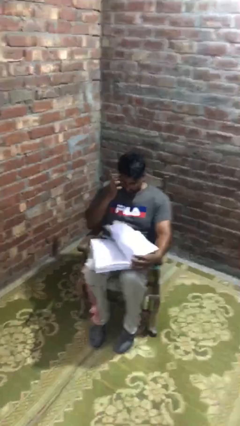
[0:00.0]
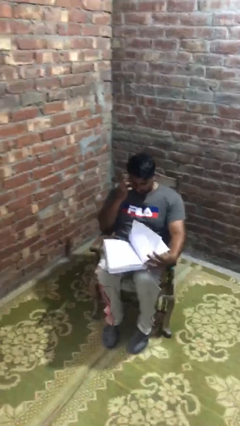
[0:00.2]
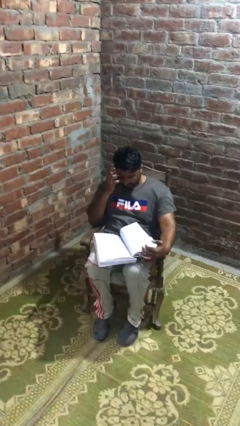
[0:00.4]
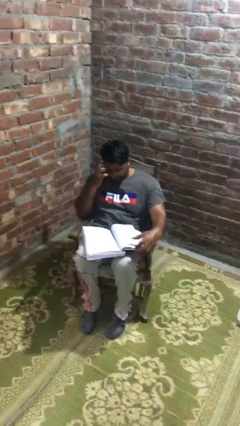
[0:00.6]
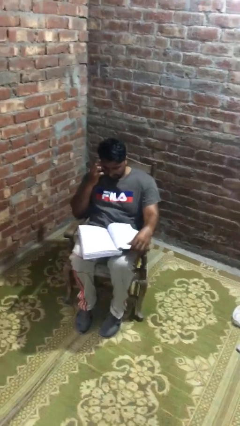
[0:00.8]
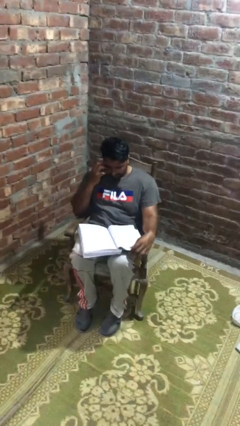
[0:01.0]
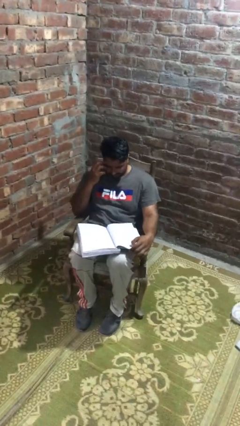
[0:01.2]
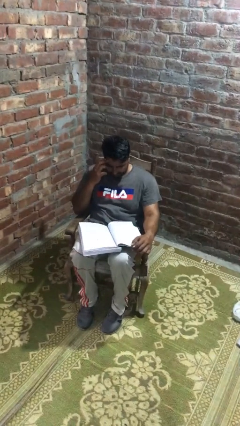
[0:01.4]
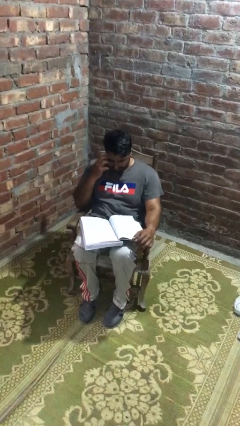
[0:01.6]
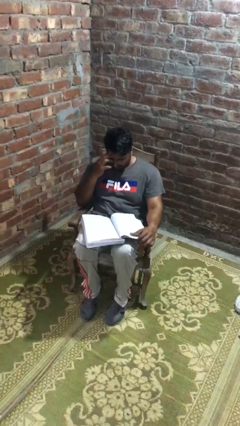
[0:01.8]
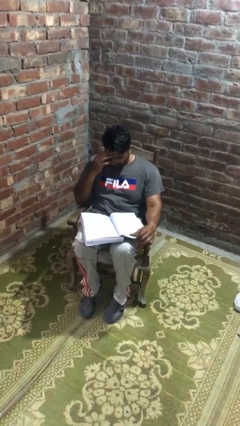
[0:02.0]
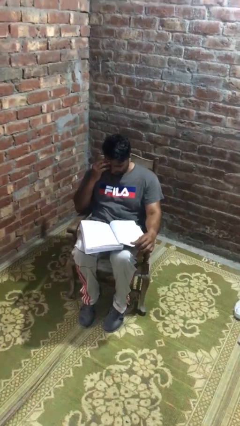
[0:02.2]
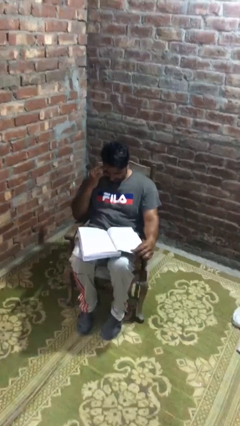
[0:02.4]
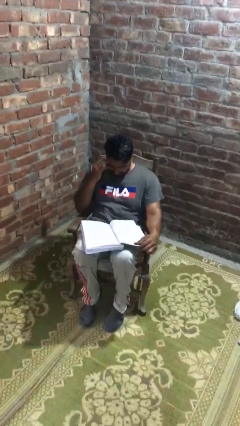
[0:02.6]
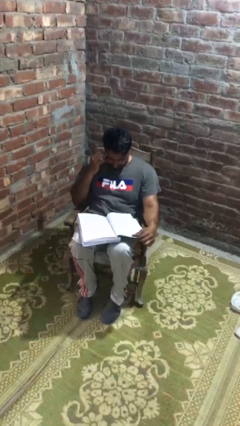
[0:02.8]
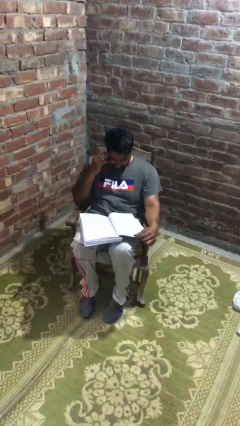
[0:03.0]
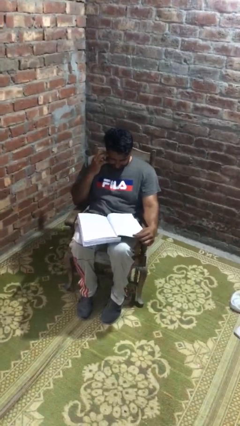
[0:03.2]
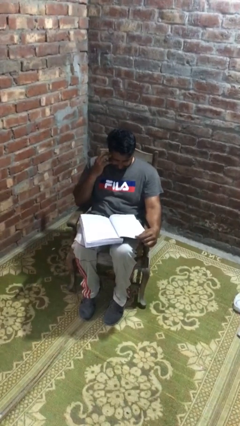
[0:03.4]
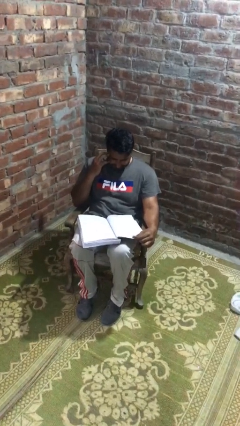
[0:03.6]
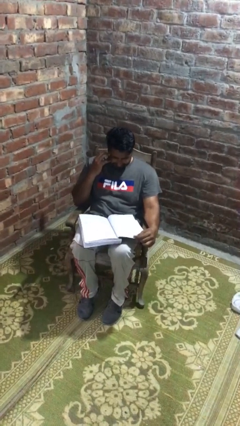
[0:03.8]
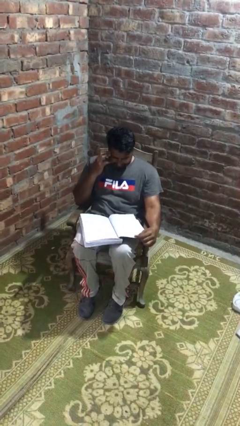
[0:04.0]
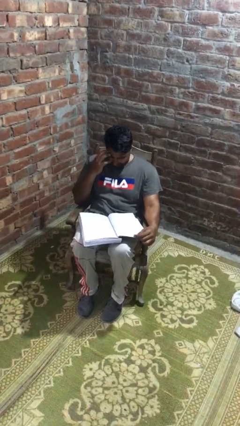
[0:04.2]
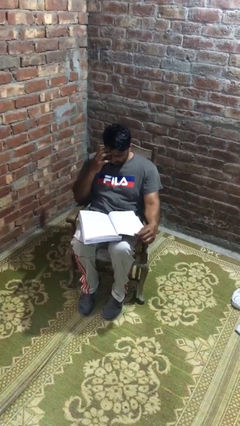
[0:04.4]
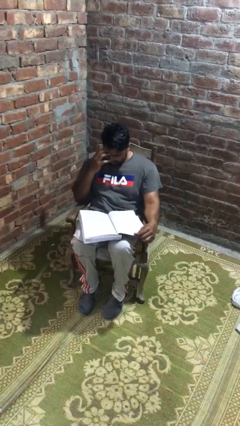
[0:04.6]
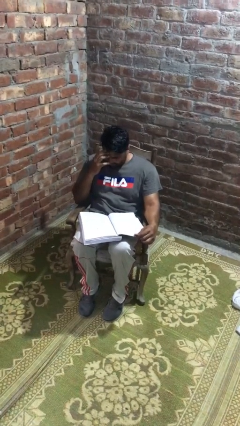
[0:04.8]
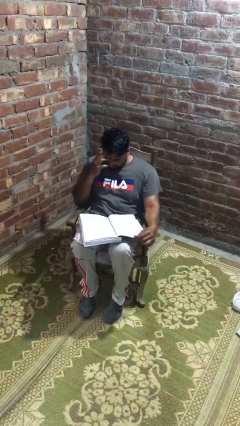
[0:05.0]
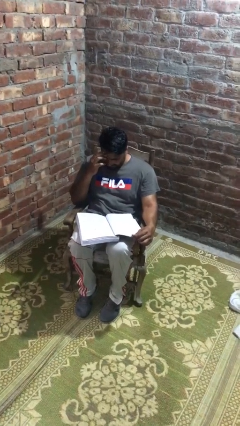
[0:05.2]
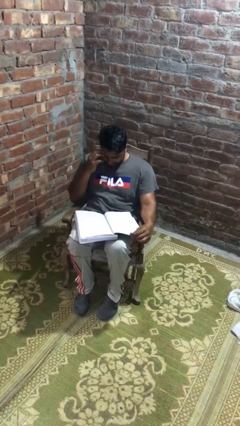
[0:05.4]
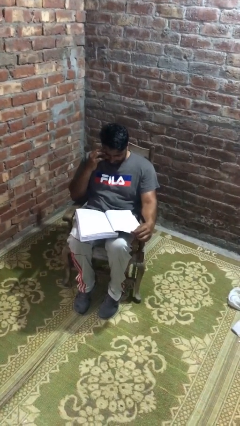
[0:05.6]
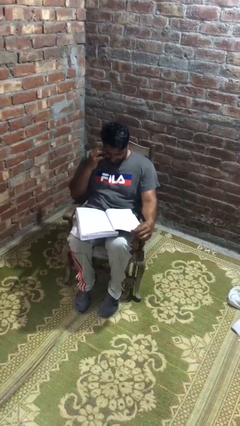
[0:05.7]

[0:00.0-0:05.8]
person reads document

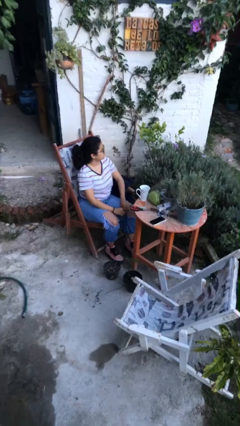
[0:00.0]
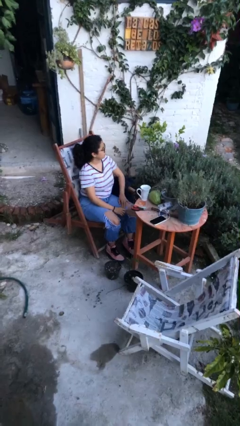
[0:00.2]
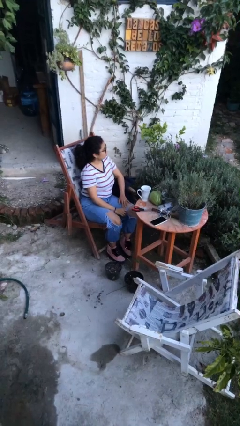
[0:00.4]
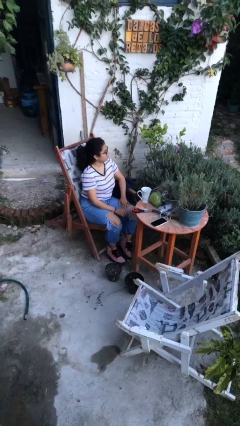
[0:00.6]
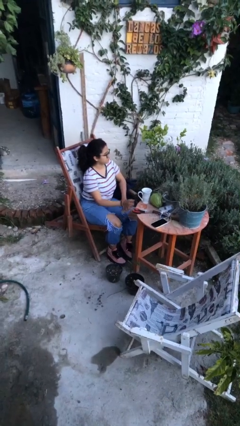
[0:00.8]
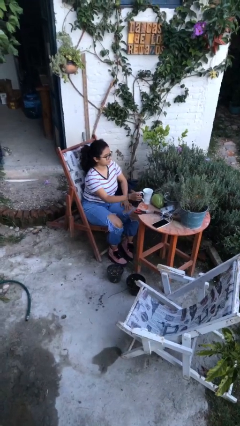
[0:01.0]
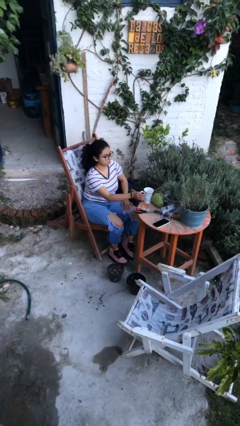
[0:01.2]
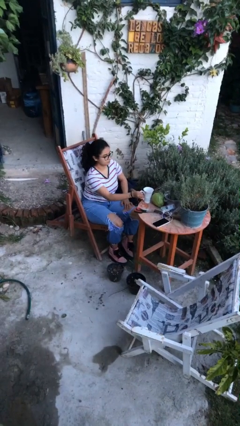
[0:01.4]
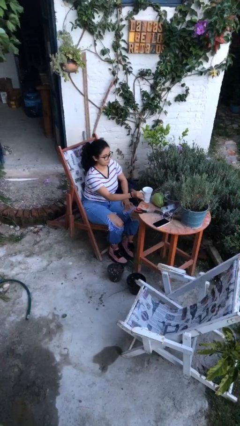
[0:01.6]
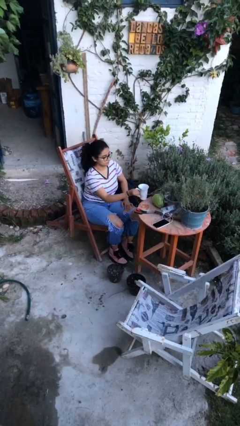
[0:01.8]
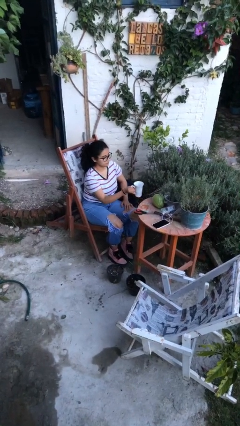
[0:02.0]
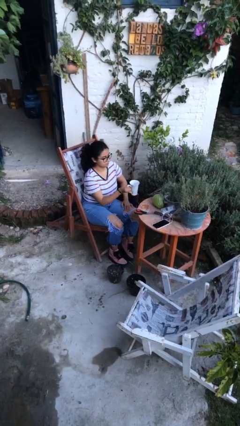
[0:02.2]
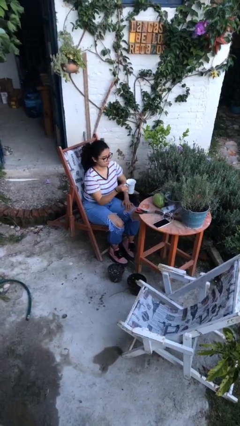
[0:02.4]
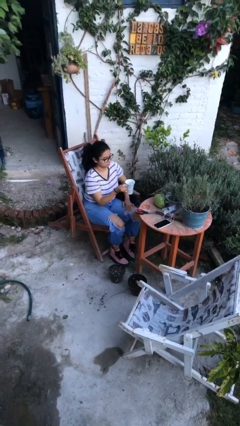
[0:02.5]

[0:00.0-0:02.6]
person picks up object from table

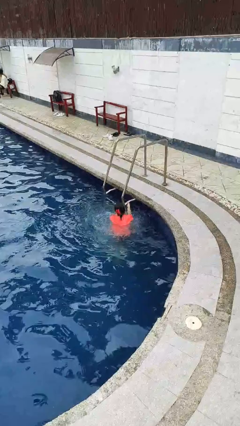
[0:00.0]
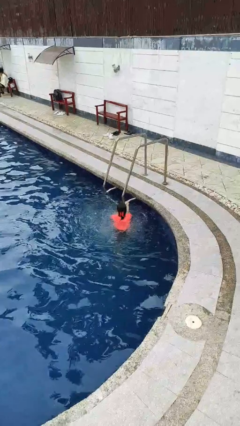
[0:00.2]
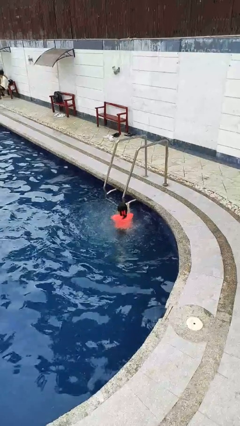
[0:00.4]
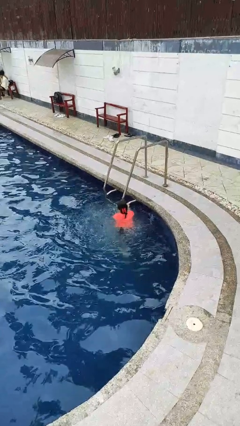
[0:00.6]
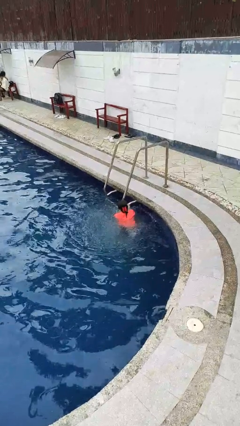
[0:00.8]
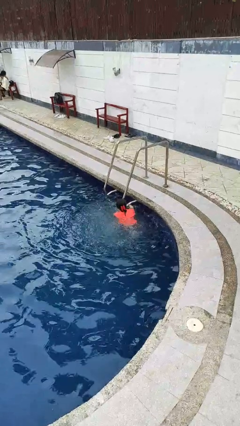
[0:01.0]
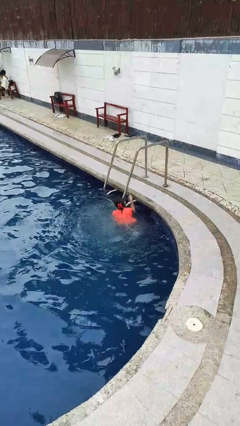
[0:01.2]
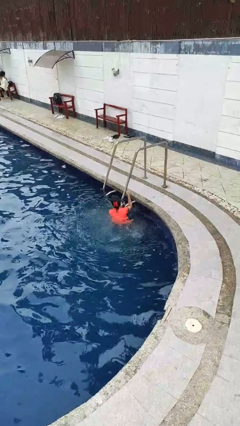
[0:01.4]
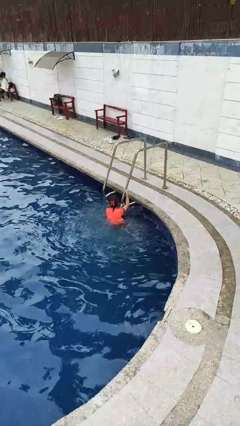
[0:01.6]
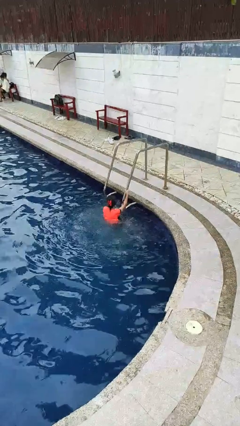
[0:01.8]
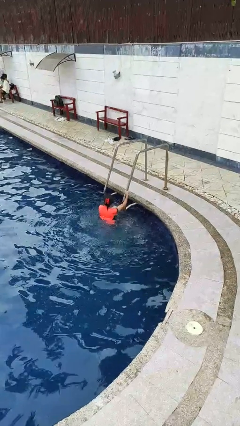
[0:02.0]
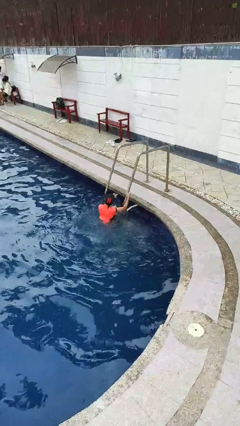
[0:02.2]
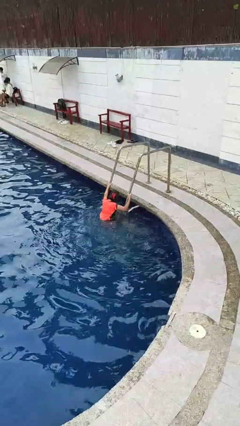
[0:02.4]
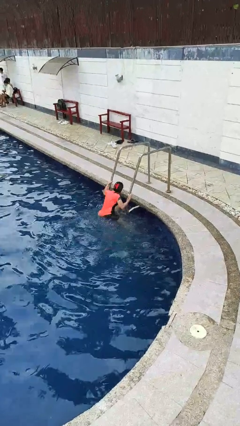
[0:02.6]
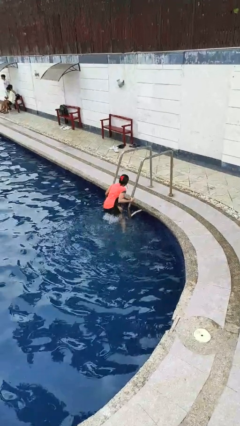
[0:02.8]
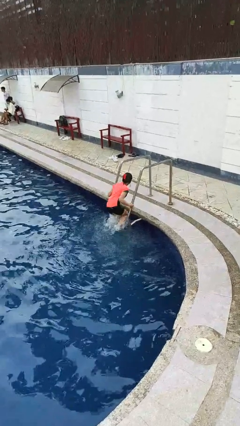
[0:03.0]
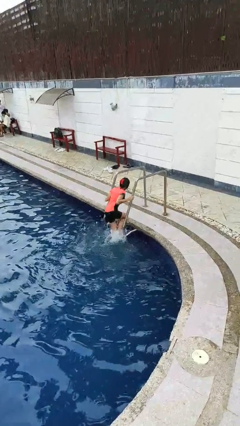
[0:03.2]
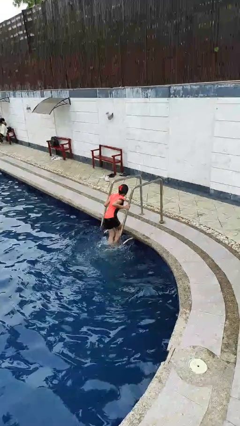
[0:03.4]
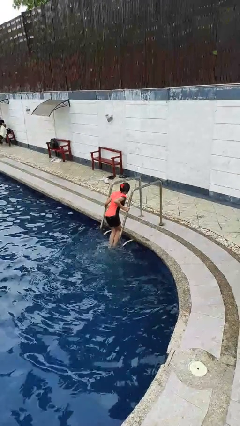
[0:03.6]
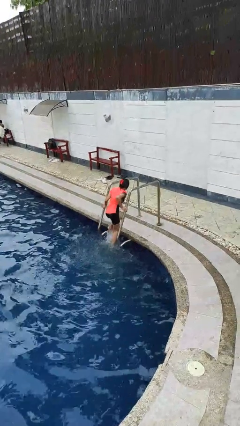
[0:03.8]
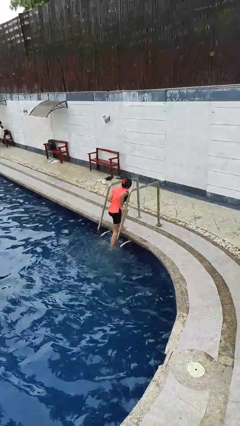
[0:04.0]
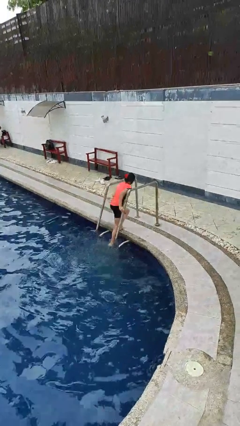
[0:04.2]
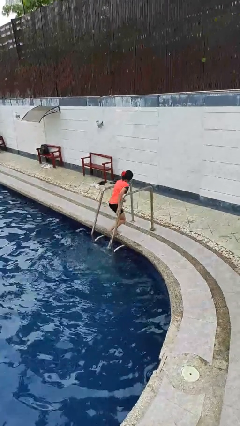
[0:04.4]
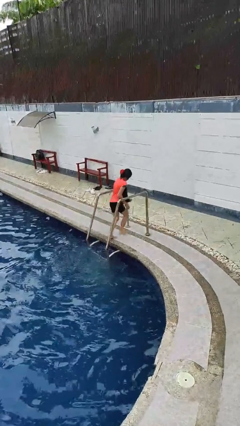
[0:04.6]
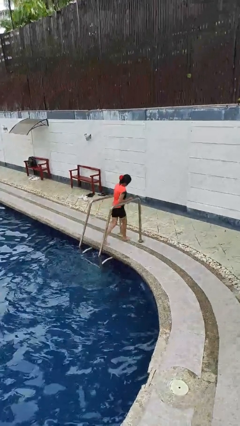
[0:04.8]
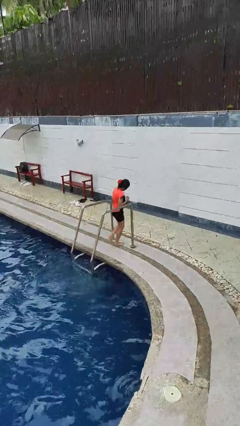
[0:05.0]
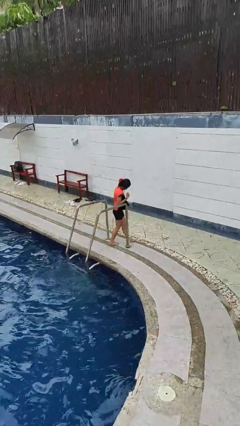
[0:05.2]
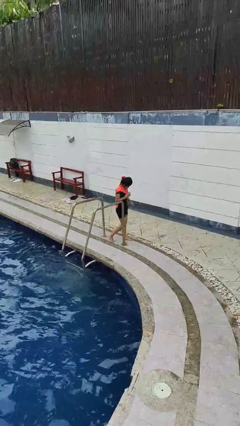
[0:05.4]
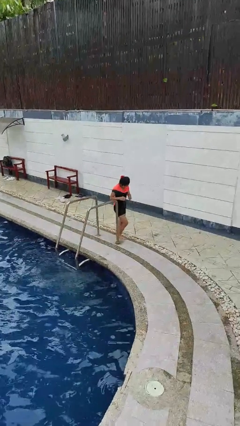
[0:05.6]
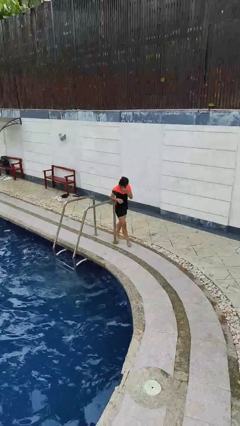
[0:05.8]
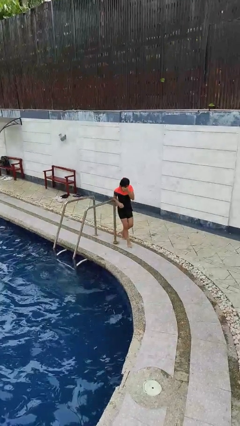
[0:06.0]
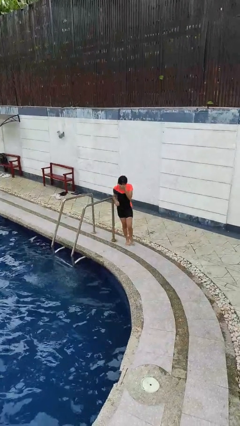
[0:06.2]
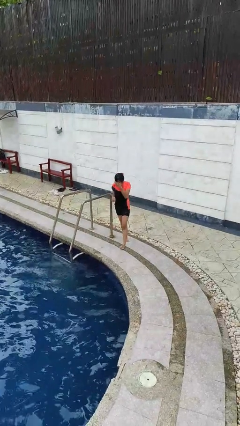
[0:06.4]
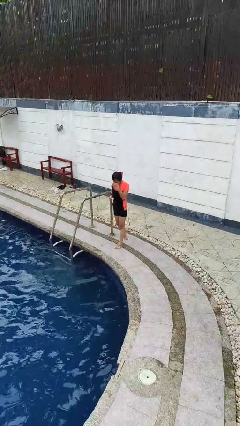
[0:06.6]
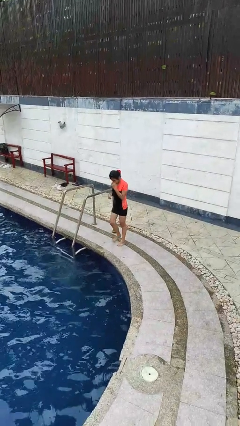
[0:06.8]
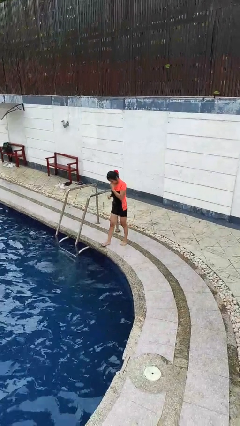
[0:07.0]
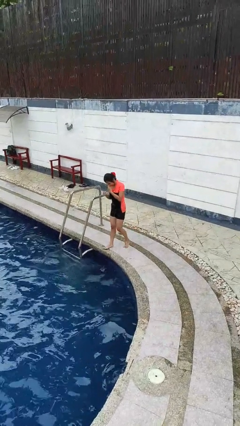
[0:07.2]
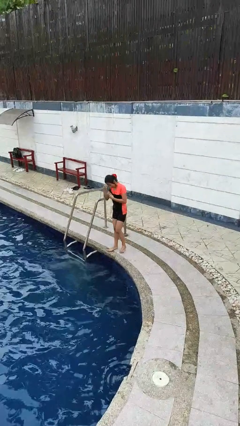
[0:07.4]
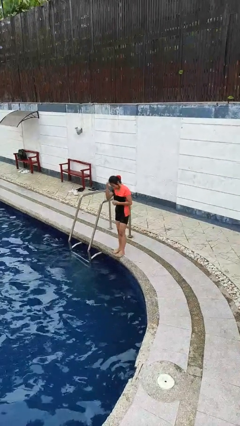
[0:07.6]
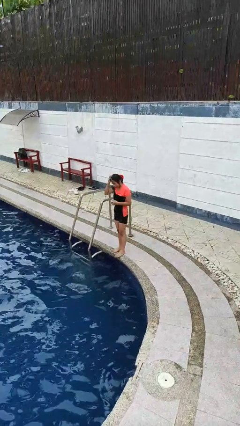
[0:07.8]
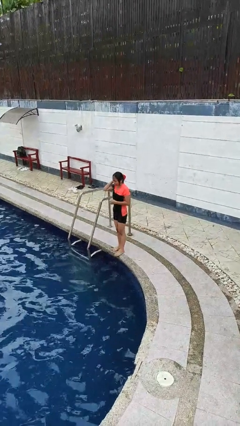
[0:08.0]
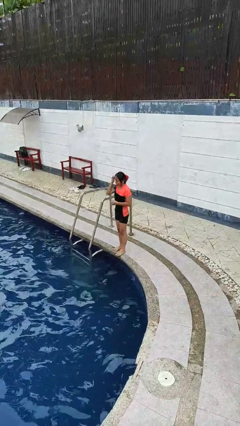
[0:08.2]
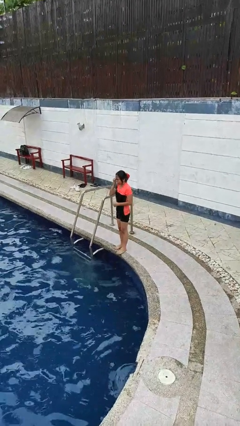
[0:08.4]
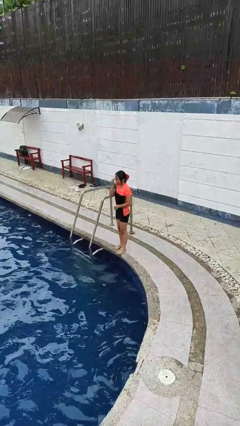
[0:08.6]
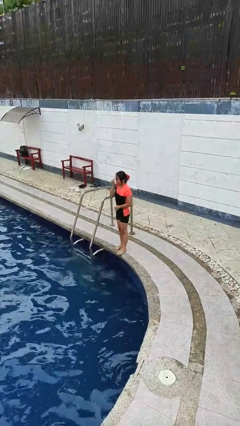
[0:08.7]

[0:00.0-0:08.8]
person exits pool

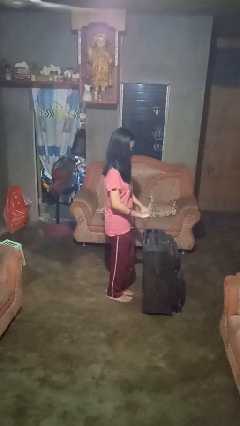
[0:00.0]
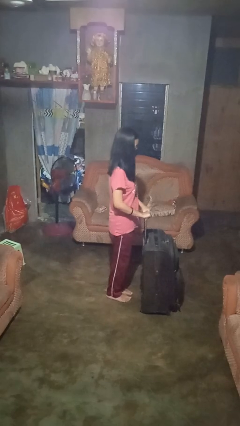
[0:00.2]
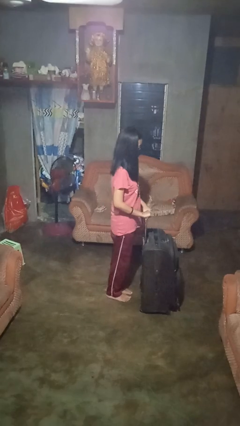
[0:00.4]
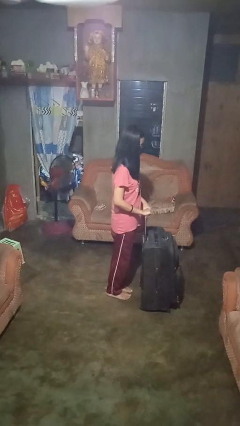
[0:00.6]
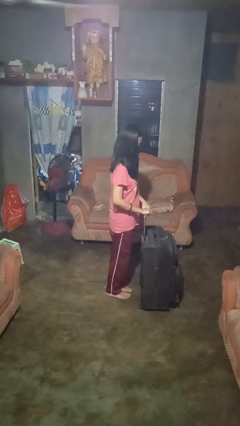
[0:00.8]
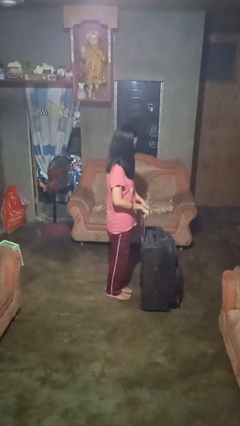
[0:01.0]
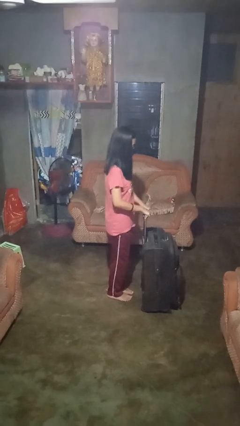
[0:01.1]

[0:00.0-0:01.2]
person pulls wheeled cart
